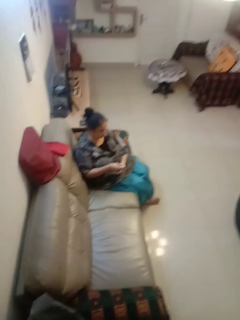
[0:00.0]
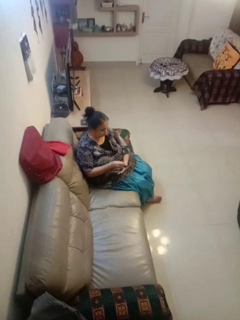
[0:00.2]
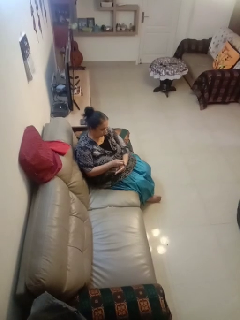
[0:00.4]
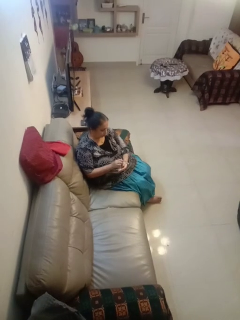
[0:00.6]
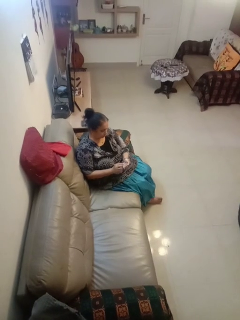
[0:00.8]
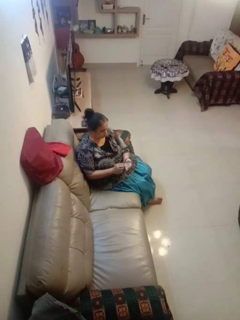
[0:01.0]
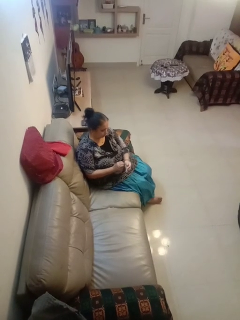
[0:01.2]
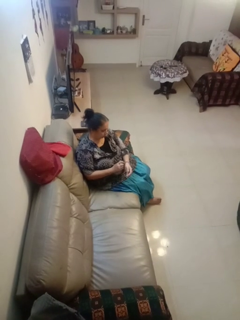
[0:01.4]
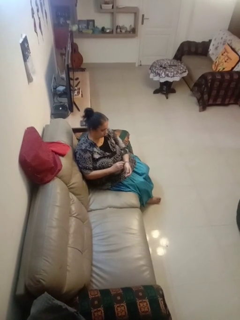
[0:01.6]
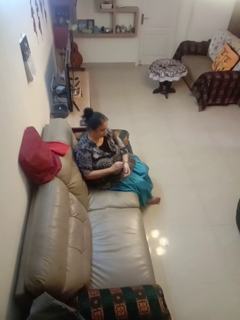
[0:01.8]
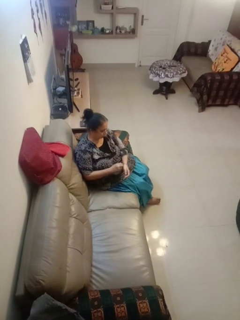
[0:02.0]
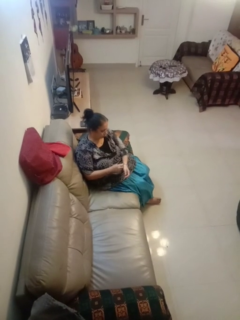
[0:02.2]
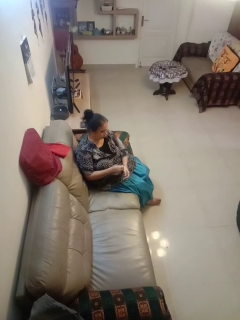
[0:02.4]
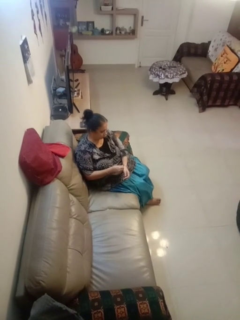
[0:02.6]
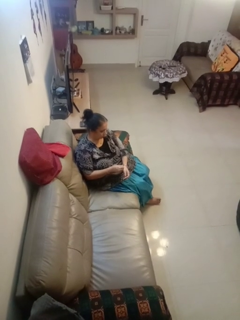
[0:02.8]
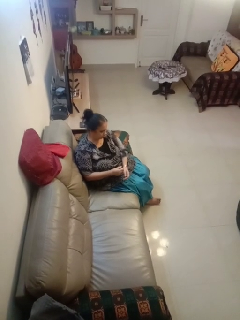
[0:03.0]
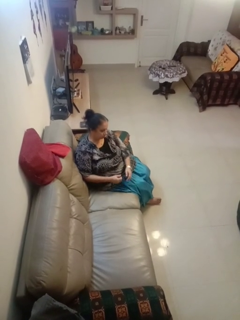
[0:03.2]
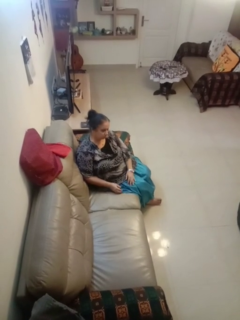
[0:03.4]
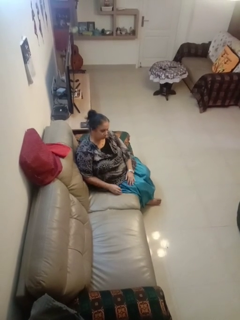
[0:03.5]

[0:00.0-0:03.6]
person puts on wristwatch

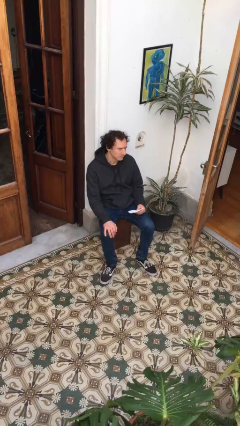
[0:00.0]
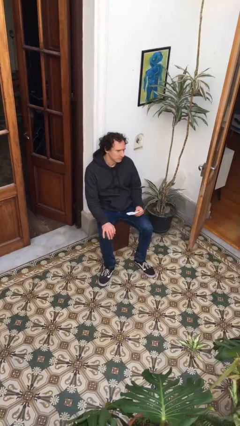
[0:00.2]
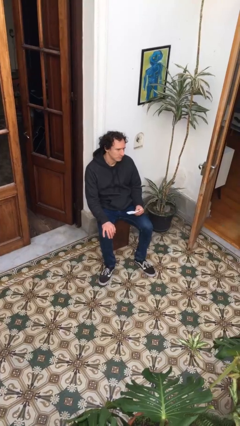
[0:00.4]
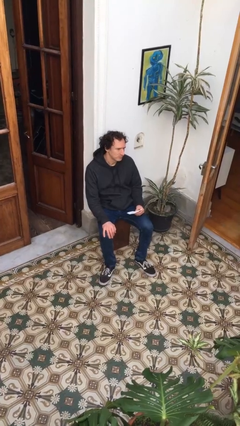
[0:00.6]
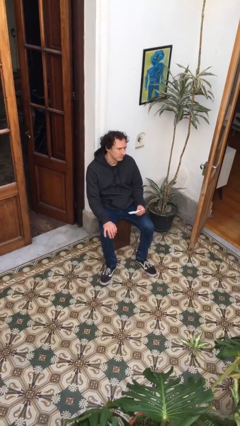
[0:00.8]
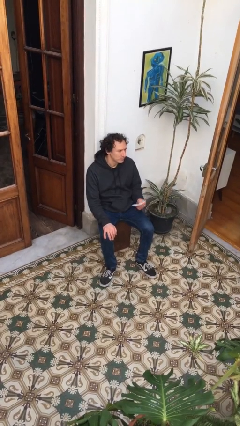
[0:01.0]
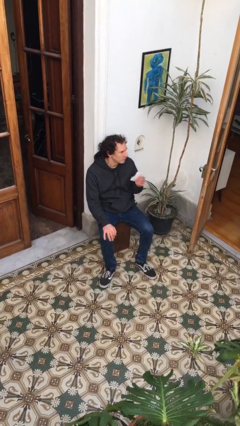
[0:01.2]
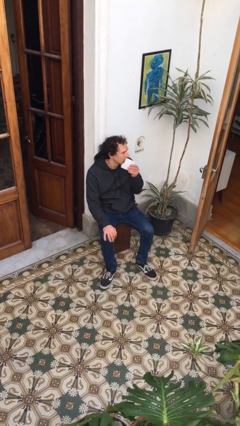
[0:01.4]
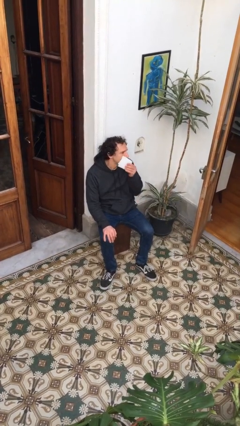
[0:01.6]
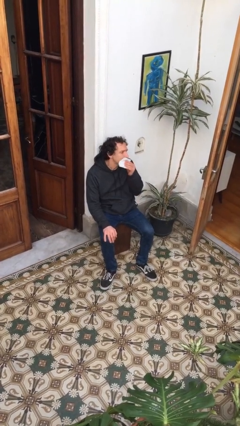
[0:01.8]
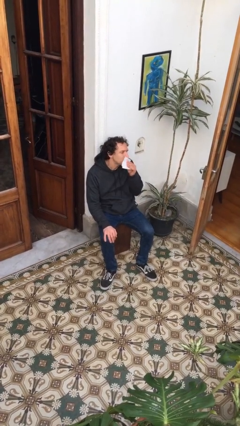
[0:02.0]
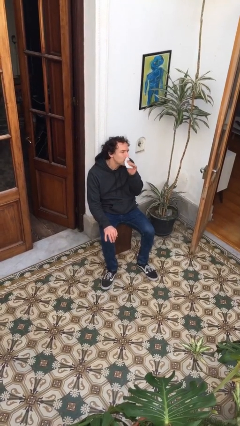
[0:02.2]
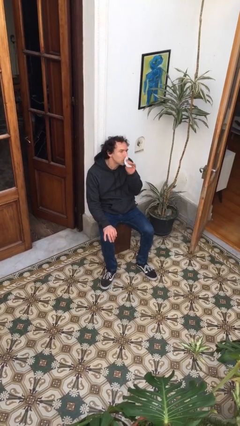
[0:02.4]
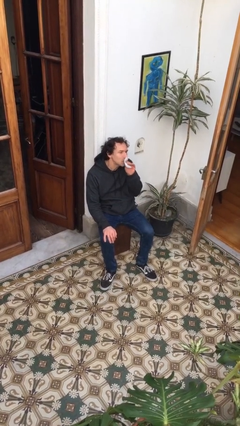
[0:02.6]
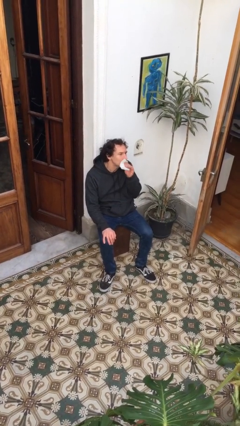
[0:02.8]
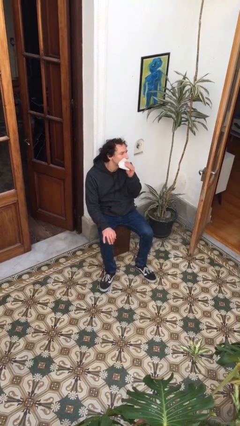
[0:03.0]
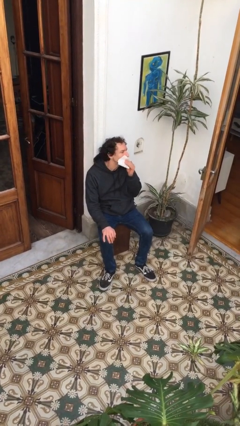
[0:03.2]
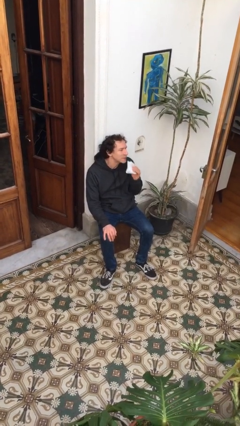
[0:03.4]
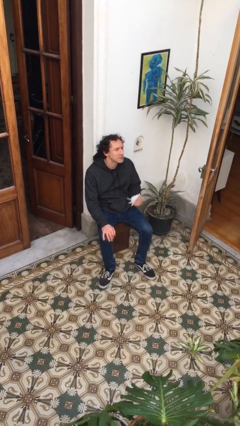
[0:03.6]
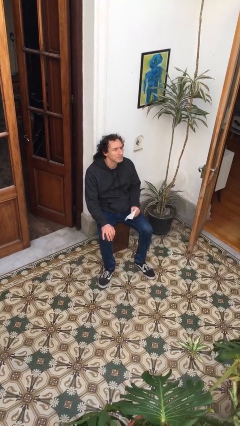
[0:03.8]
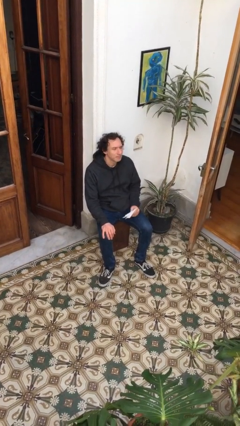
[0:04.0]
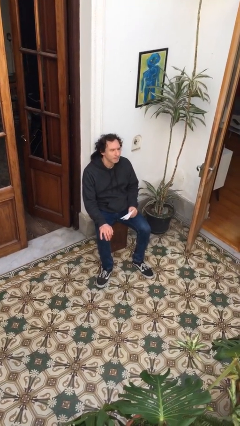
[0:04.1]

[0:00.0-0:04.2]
person wipes mouth with napkin

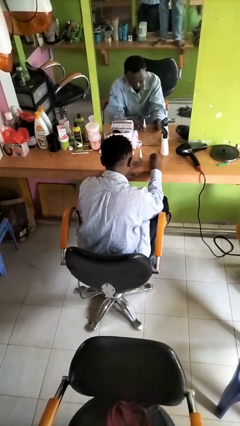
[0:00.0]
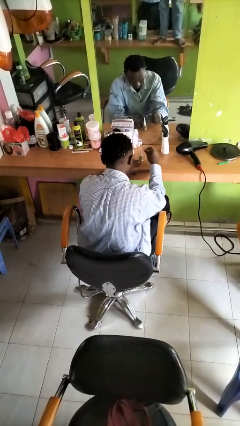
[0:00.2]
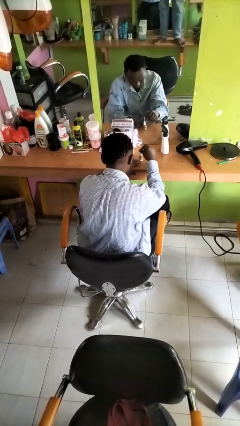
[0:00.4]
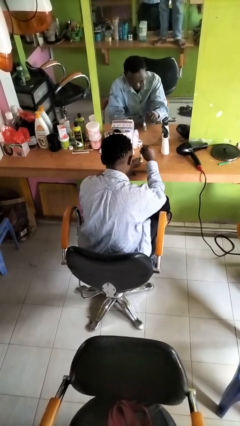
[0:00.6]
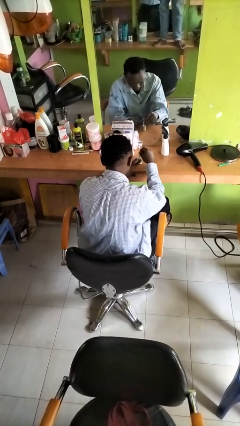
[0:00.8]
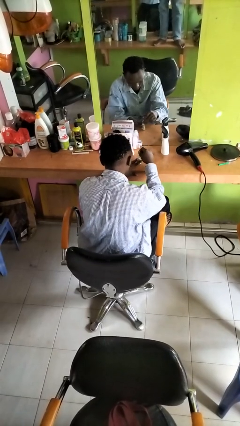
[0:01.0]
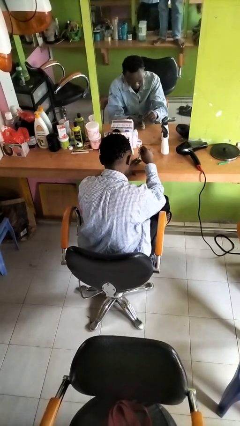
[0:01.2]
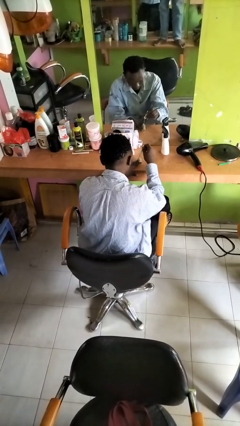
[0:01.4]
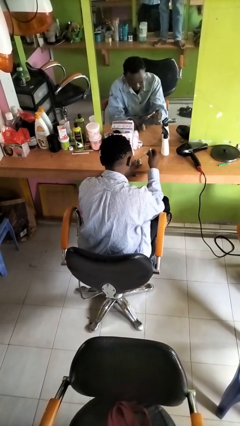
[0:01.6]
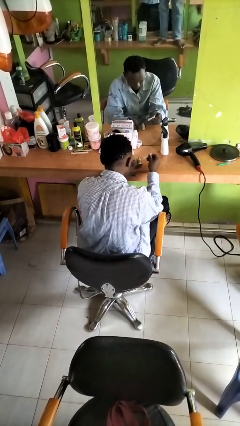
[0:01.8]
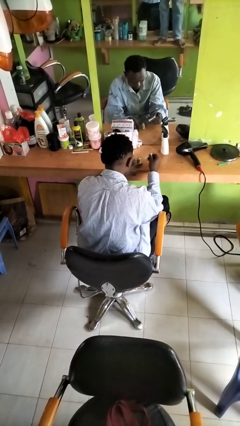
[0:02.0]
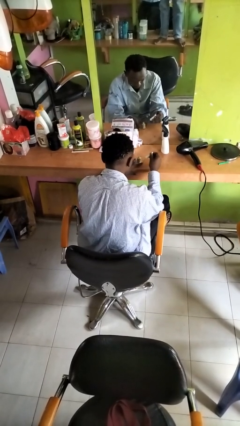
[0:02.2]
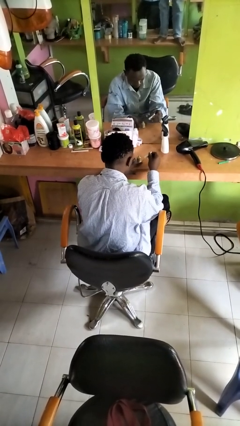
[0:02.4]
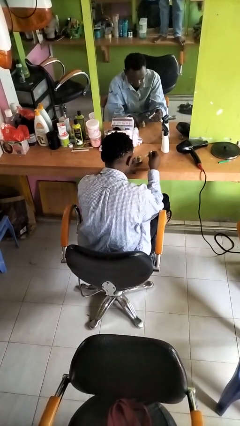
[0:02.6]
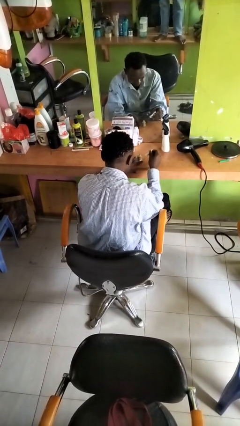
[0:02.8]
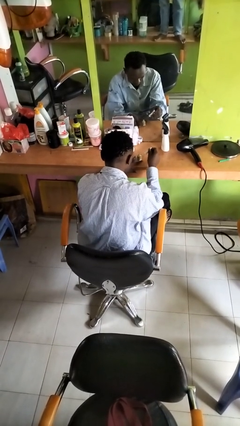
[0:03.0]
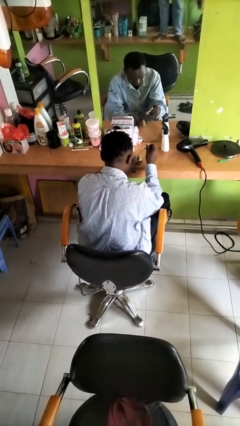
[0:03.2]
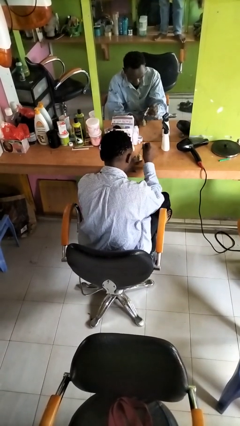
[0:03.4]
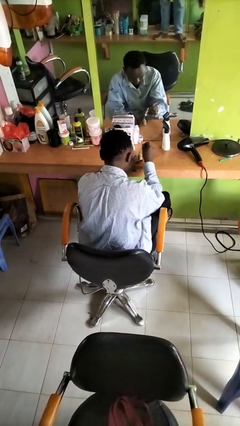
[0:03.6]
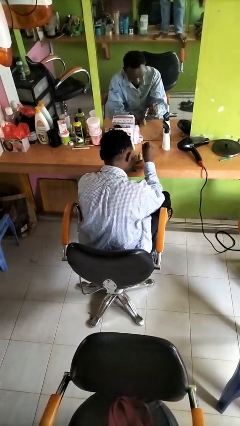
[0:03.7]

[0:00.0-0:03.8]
person paints fingernails

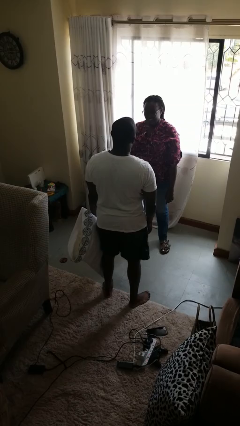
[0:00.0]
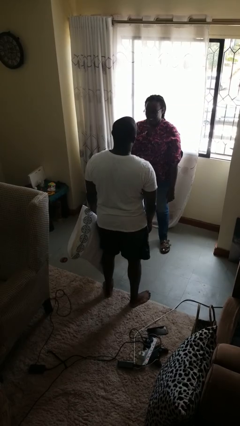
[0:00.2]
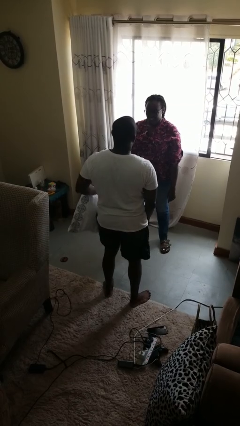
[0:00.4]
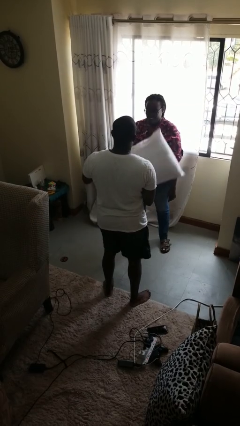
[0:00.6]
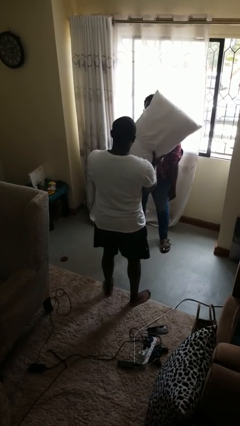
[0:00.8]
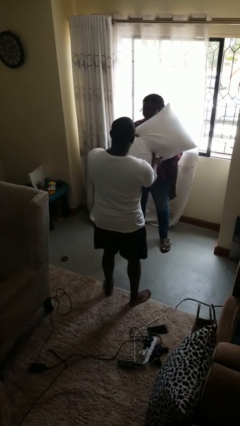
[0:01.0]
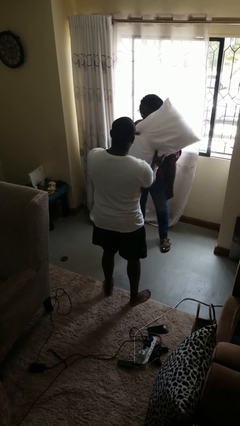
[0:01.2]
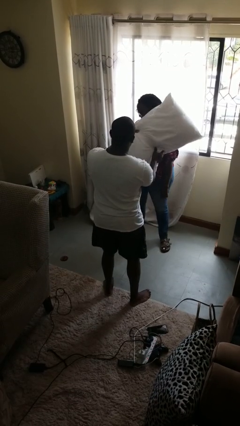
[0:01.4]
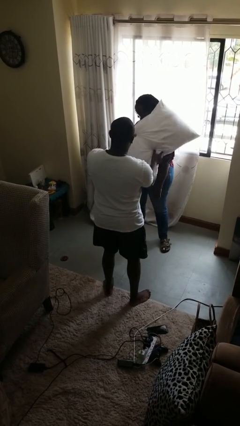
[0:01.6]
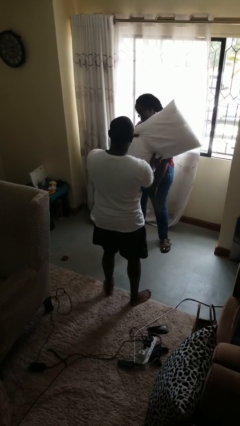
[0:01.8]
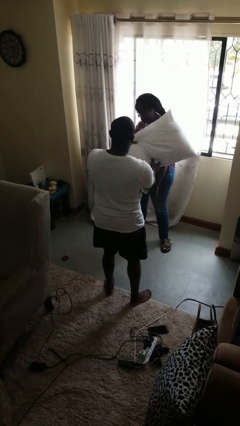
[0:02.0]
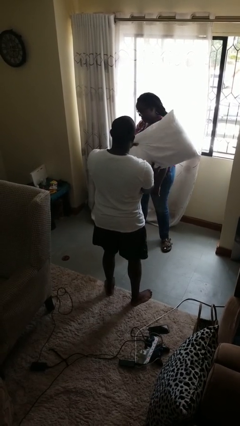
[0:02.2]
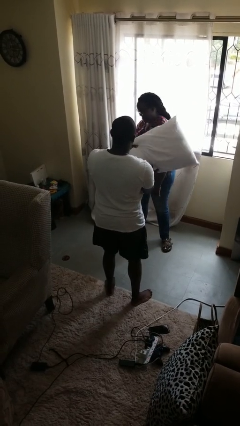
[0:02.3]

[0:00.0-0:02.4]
person hits person with pillow

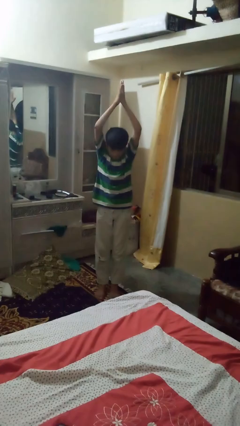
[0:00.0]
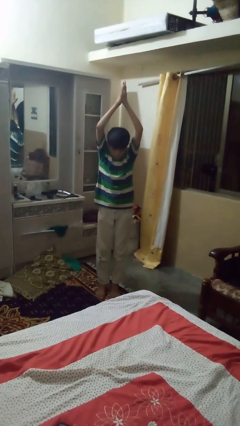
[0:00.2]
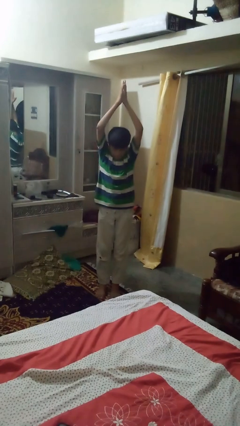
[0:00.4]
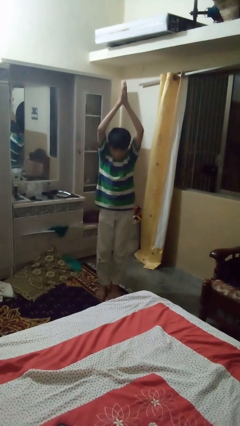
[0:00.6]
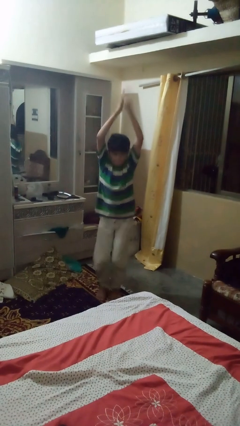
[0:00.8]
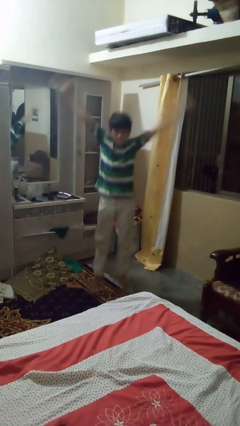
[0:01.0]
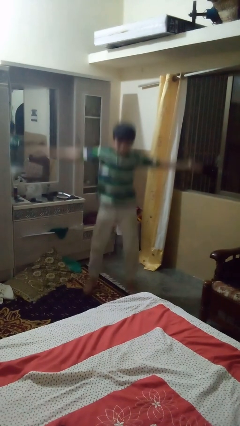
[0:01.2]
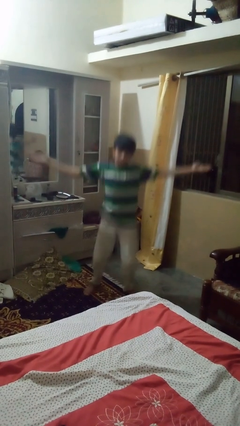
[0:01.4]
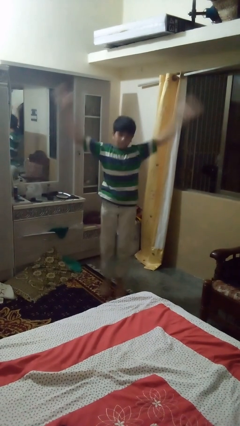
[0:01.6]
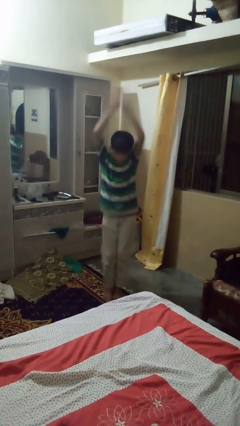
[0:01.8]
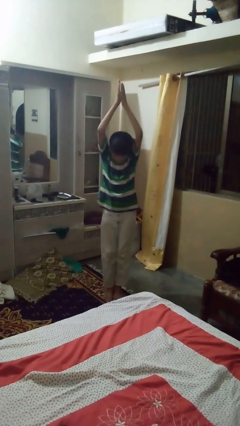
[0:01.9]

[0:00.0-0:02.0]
person exercises with jumping jacks

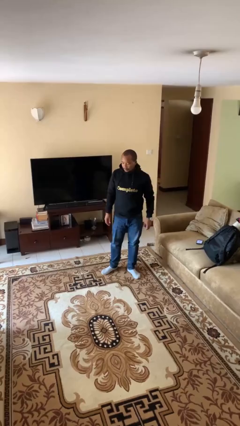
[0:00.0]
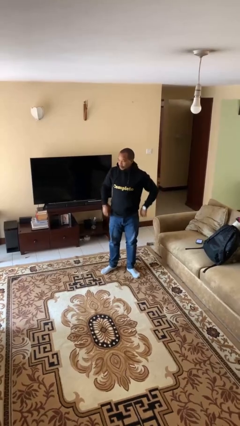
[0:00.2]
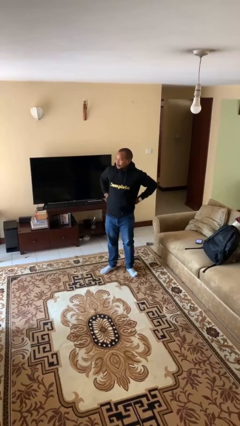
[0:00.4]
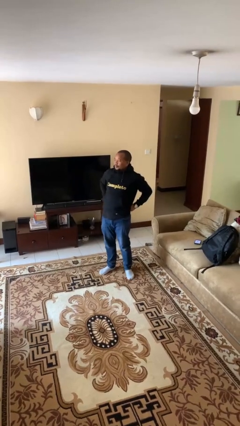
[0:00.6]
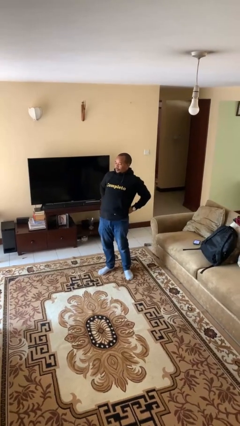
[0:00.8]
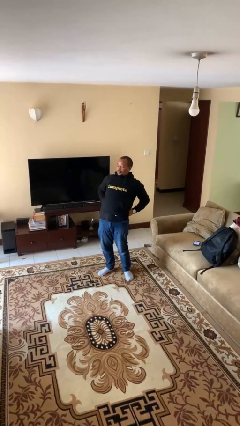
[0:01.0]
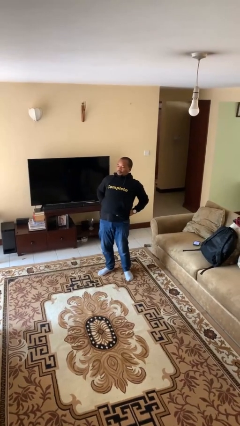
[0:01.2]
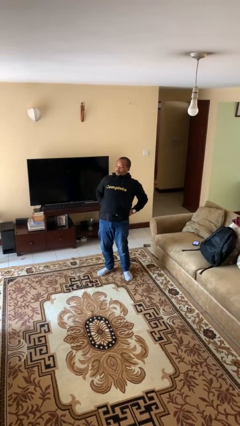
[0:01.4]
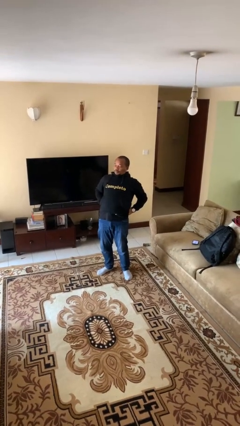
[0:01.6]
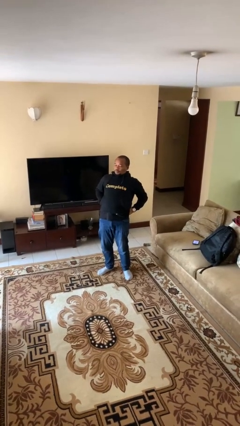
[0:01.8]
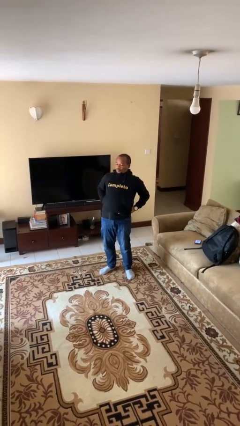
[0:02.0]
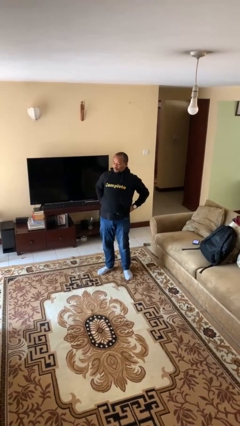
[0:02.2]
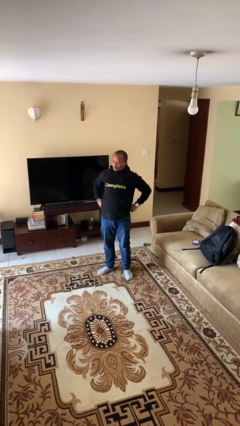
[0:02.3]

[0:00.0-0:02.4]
person stretches back
